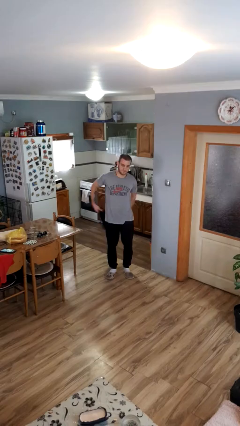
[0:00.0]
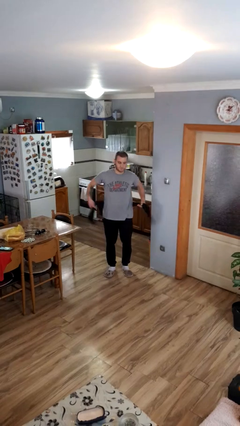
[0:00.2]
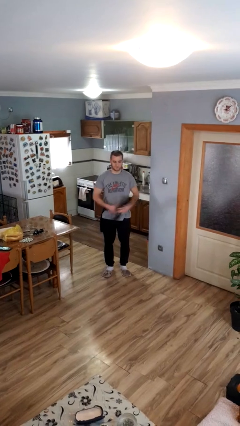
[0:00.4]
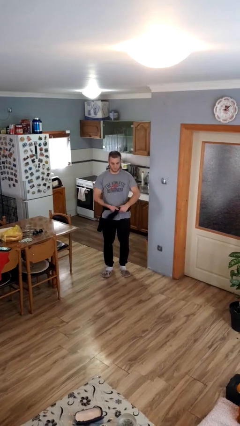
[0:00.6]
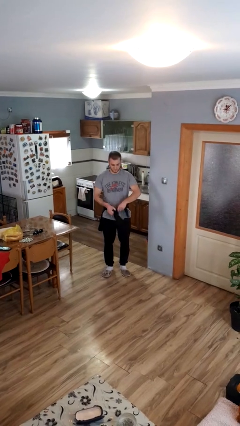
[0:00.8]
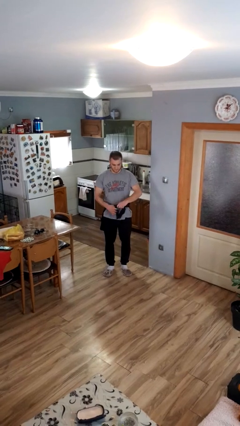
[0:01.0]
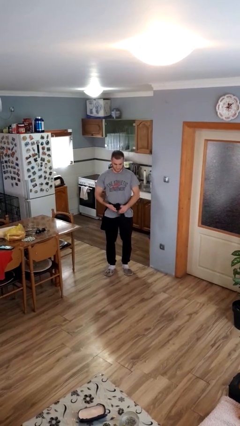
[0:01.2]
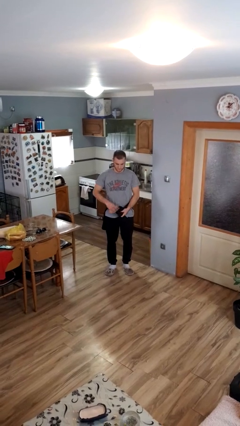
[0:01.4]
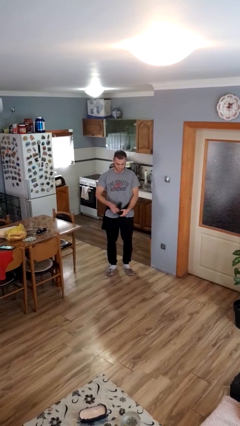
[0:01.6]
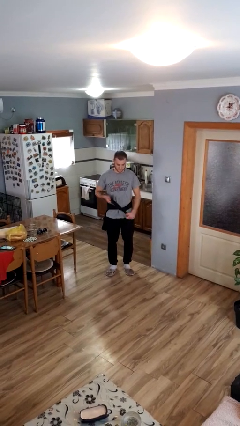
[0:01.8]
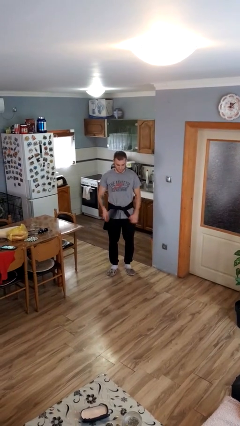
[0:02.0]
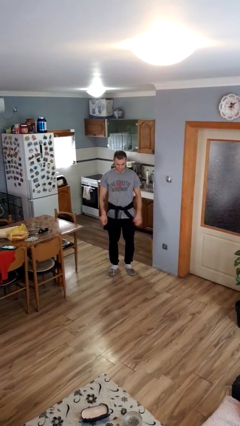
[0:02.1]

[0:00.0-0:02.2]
person ties jacket around waist

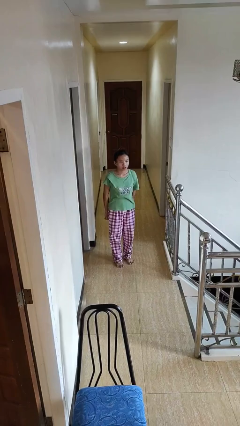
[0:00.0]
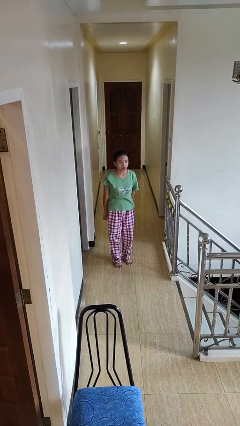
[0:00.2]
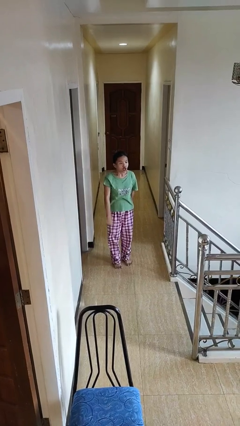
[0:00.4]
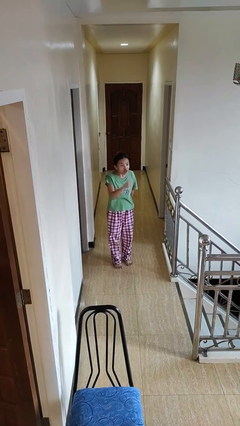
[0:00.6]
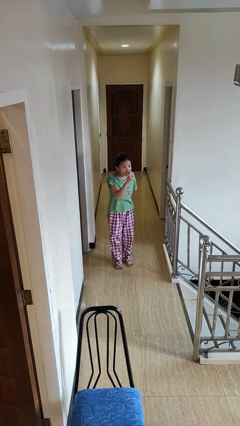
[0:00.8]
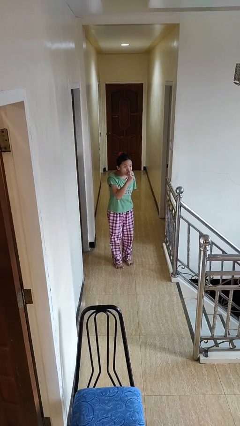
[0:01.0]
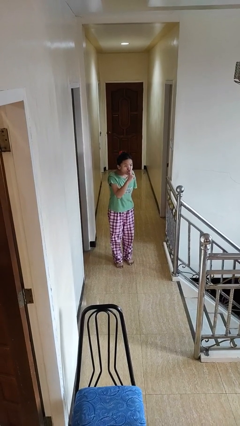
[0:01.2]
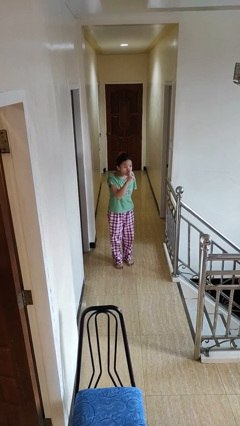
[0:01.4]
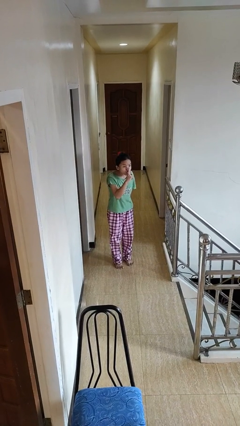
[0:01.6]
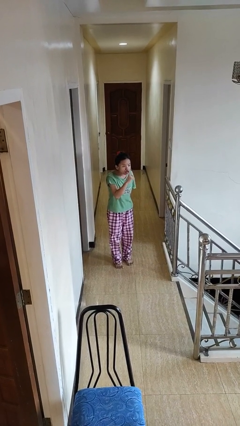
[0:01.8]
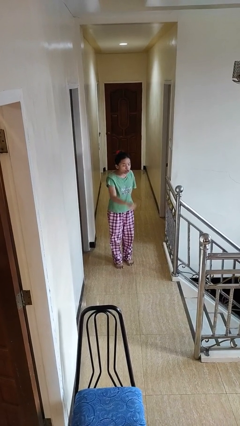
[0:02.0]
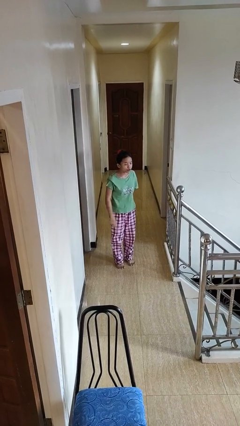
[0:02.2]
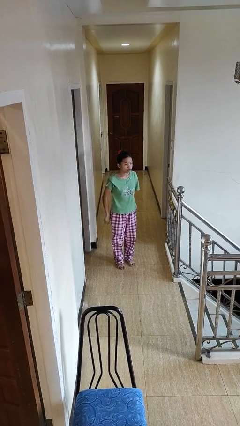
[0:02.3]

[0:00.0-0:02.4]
person gestures be quiet

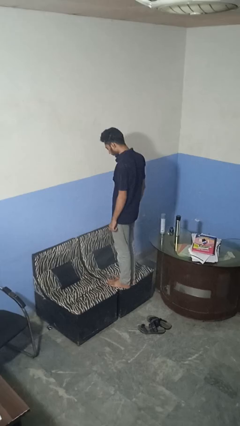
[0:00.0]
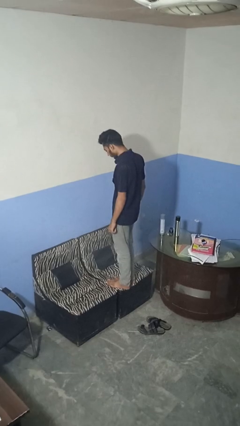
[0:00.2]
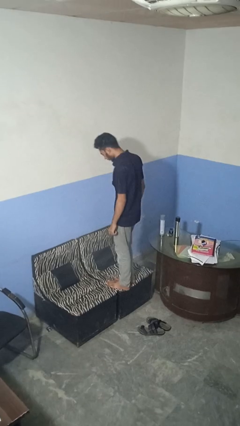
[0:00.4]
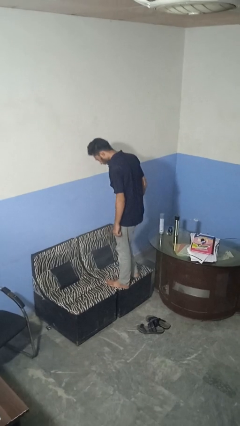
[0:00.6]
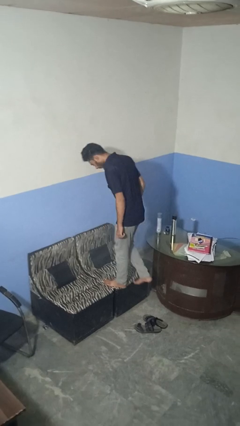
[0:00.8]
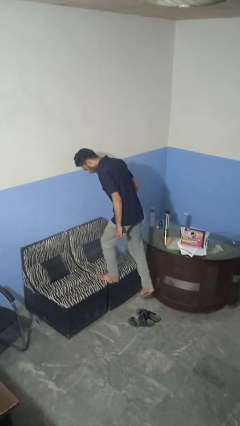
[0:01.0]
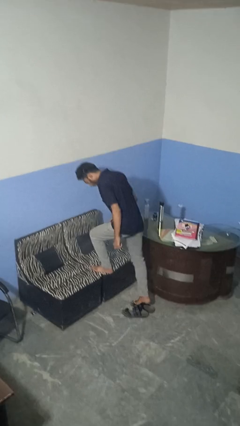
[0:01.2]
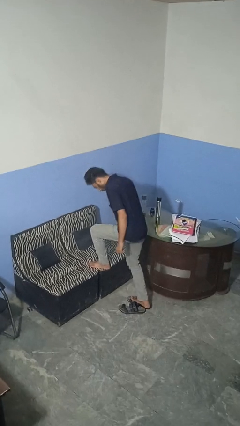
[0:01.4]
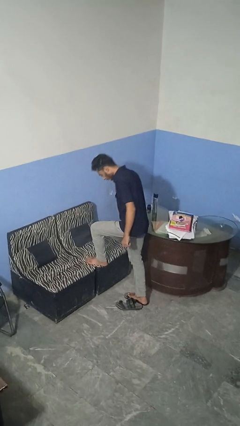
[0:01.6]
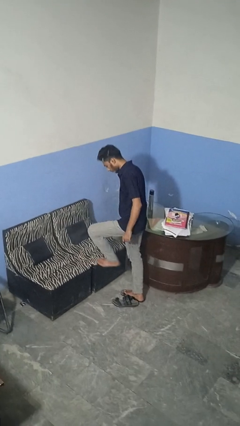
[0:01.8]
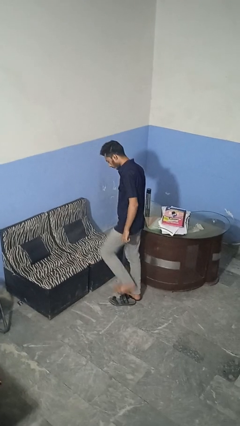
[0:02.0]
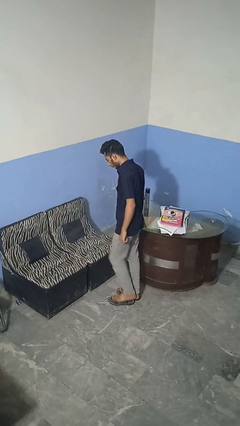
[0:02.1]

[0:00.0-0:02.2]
person climbs off couch

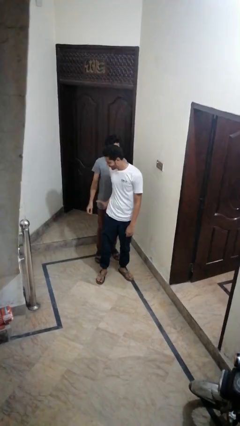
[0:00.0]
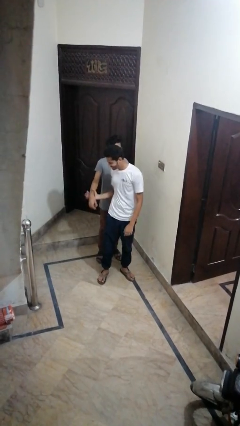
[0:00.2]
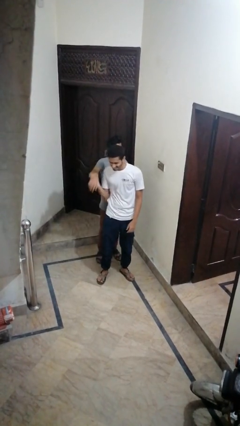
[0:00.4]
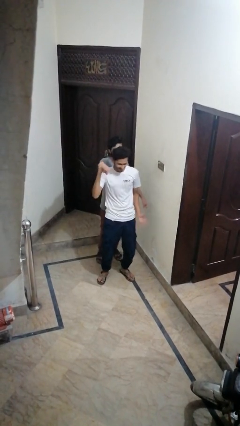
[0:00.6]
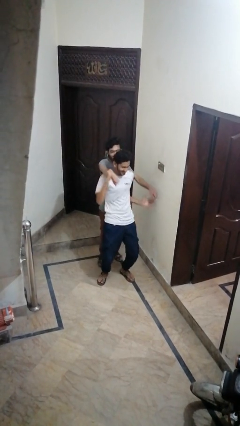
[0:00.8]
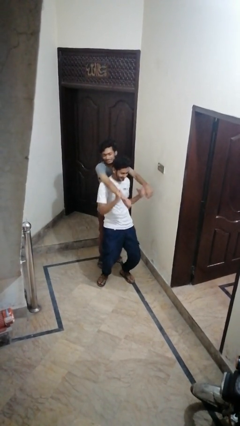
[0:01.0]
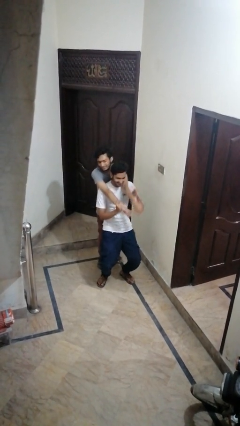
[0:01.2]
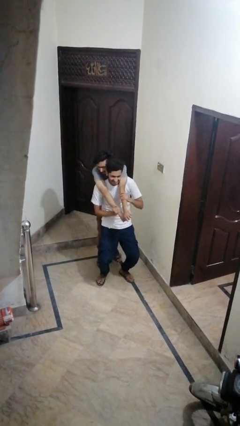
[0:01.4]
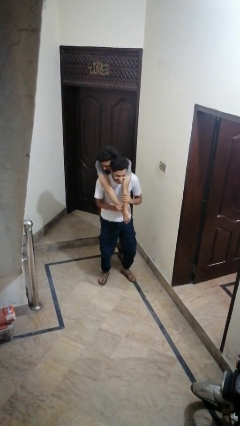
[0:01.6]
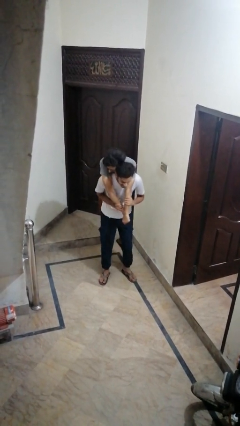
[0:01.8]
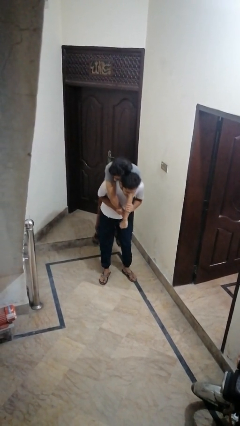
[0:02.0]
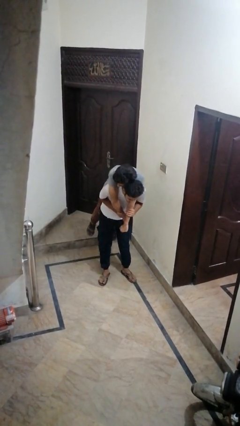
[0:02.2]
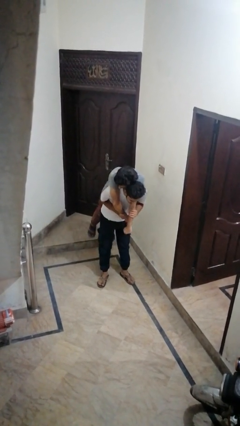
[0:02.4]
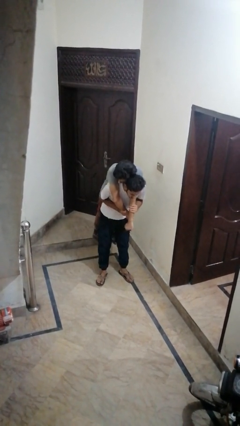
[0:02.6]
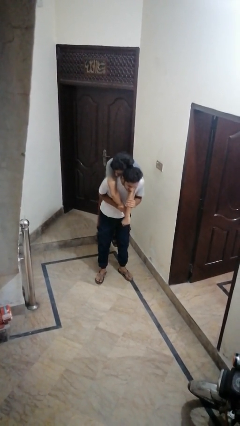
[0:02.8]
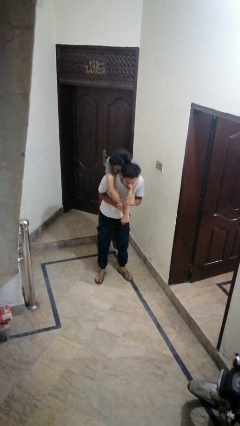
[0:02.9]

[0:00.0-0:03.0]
person carries person over shoulder

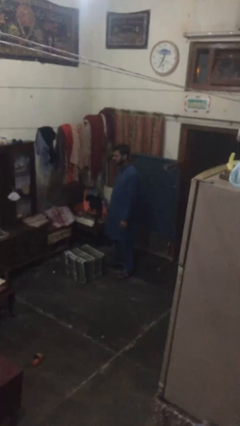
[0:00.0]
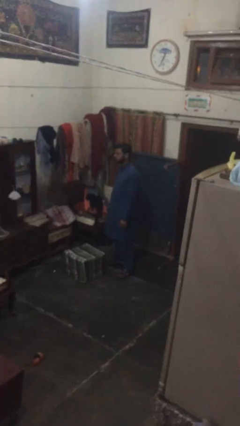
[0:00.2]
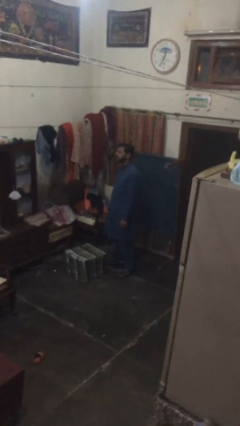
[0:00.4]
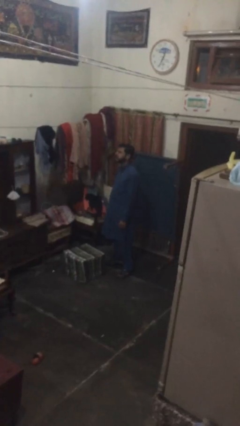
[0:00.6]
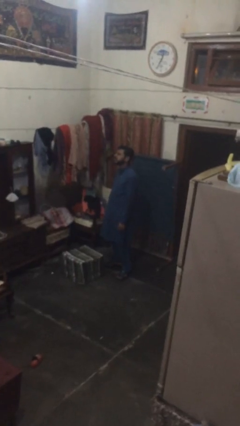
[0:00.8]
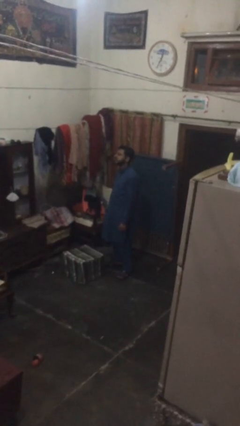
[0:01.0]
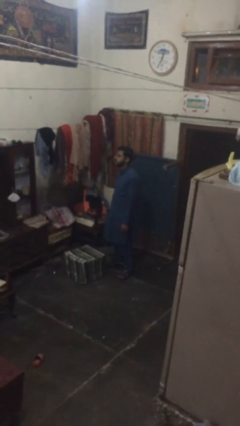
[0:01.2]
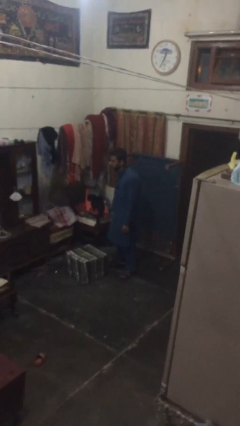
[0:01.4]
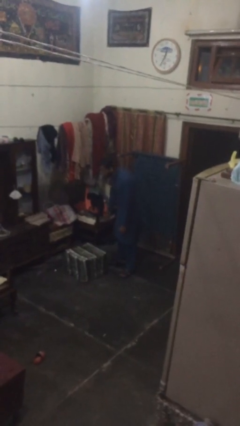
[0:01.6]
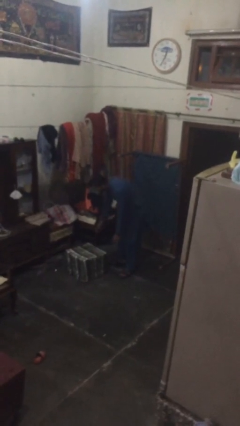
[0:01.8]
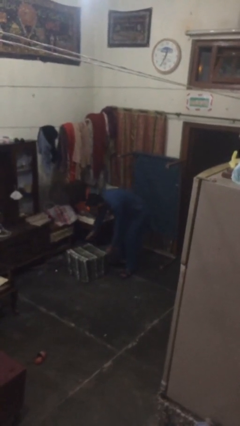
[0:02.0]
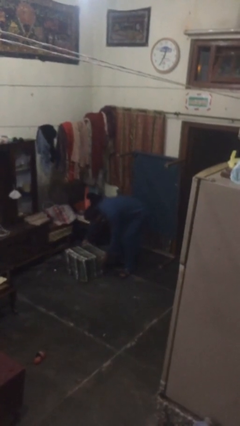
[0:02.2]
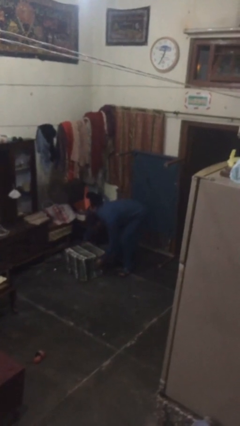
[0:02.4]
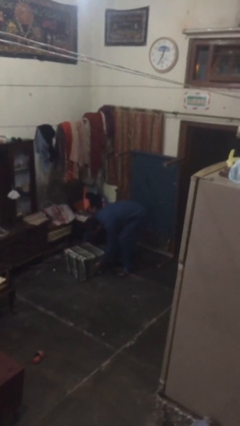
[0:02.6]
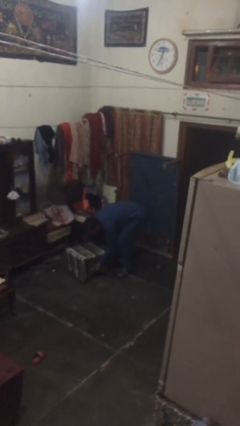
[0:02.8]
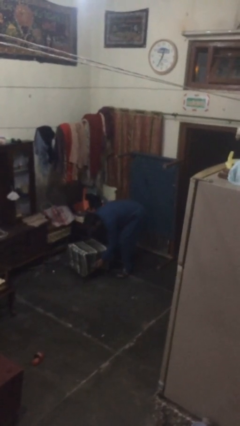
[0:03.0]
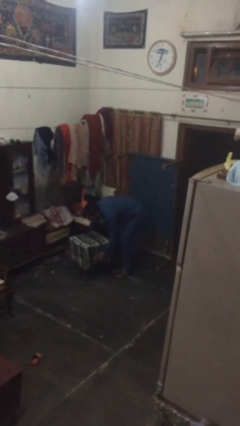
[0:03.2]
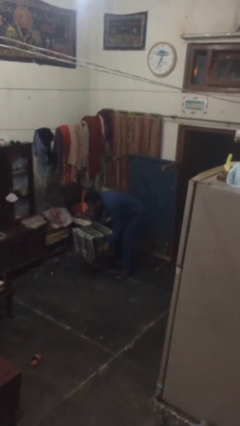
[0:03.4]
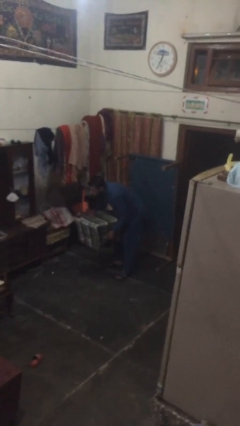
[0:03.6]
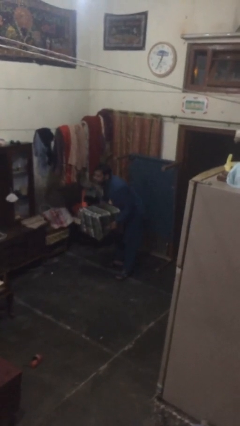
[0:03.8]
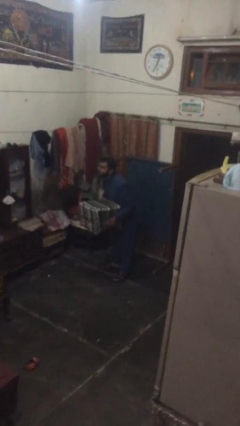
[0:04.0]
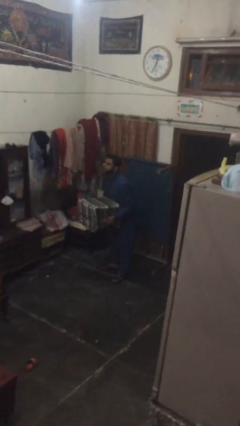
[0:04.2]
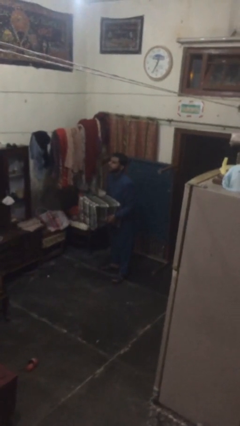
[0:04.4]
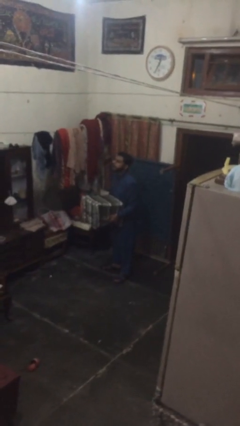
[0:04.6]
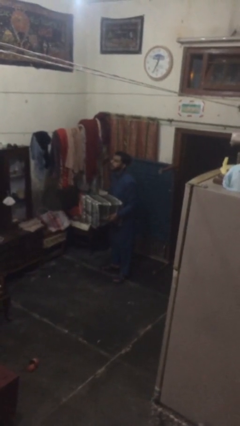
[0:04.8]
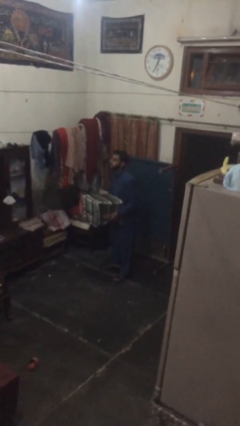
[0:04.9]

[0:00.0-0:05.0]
person picks up object from floor

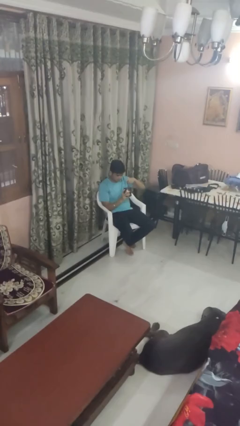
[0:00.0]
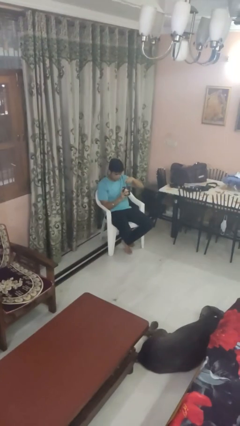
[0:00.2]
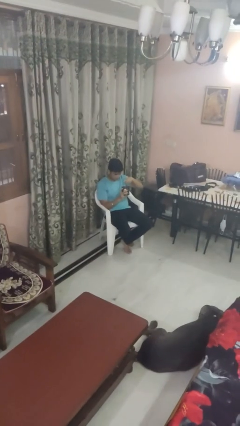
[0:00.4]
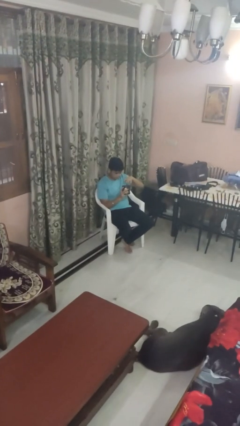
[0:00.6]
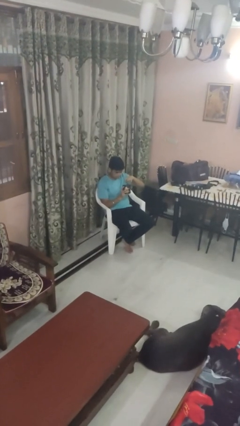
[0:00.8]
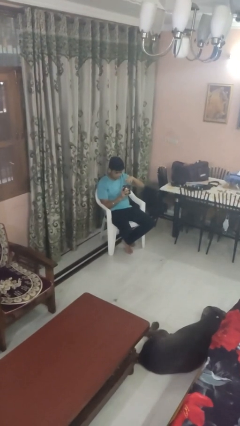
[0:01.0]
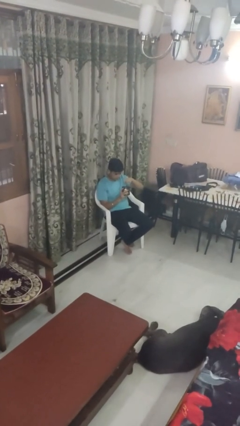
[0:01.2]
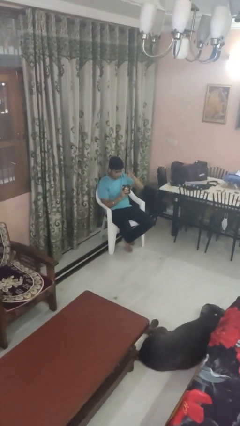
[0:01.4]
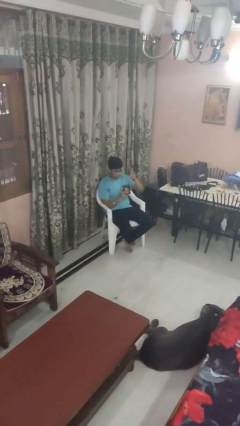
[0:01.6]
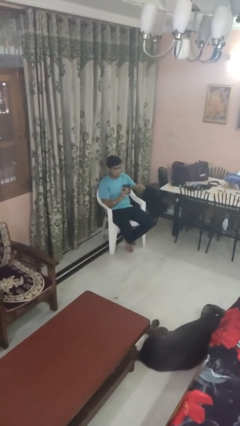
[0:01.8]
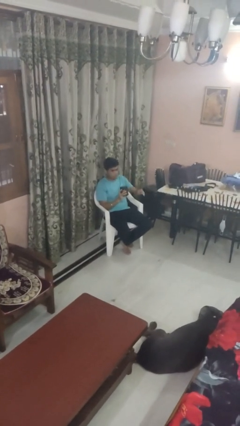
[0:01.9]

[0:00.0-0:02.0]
person taps object with finger

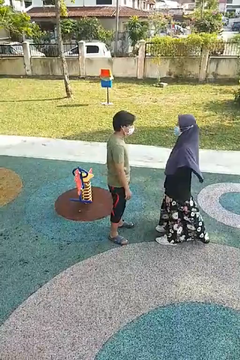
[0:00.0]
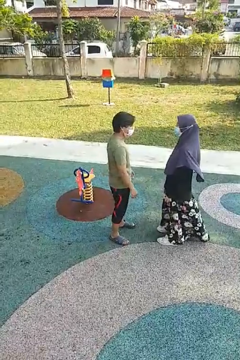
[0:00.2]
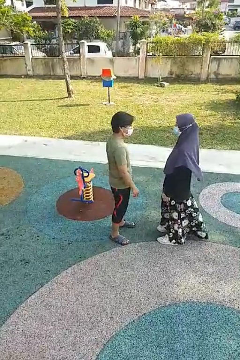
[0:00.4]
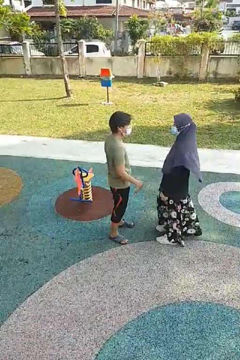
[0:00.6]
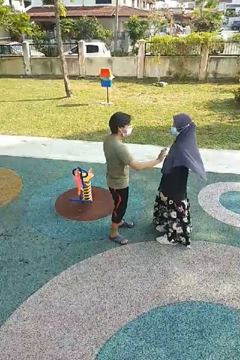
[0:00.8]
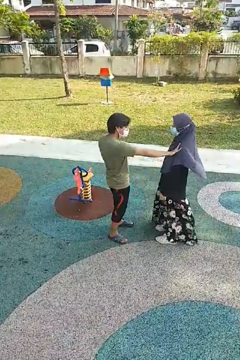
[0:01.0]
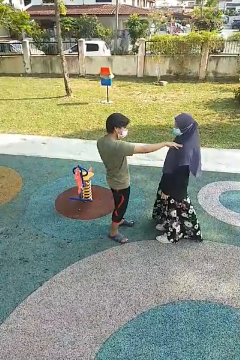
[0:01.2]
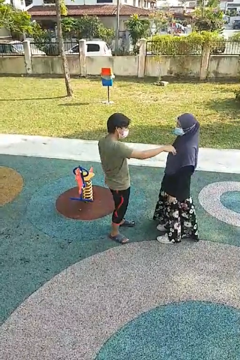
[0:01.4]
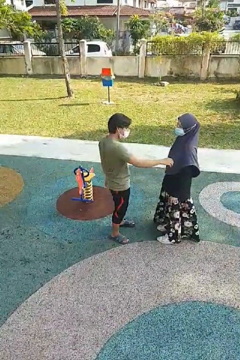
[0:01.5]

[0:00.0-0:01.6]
person shoves person
